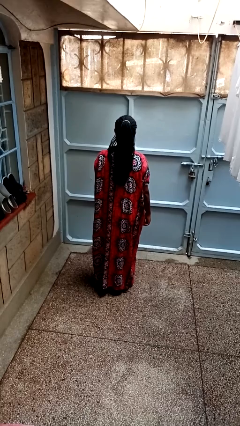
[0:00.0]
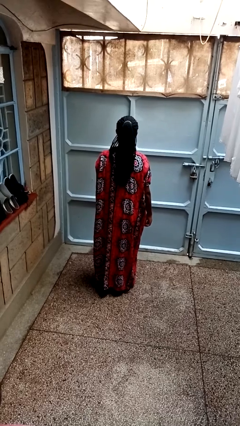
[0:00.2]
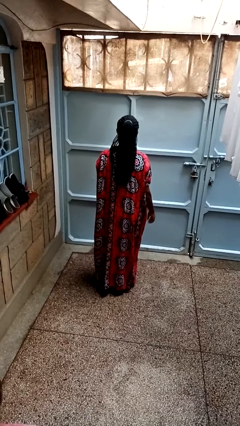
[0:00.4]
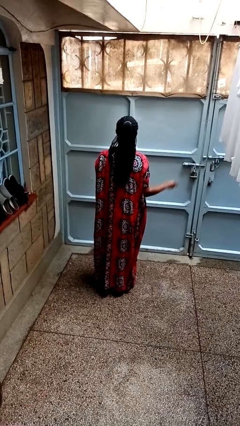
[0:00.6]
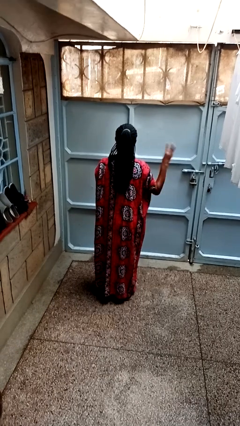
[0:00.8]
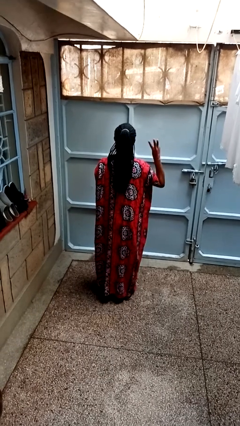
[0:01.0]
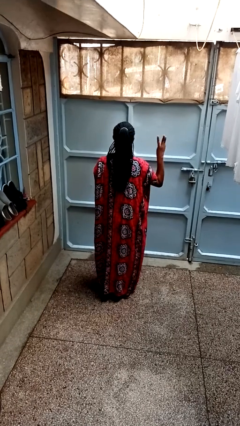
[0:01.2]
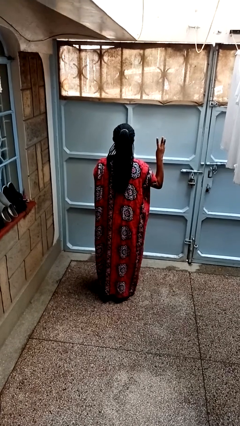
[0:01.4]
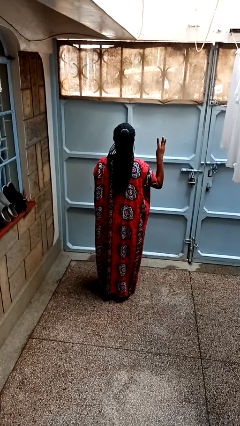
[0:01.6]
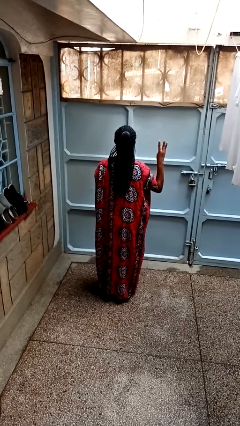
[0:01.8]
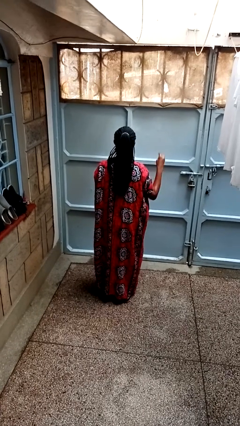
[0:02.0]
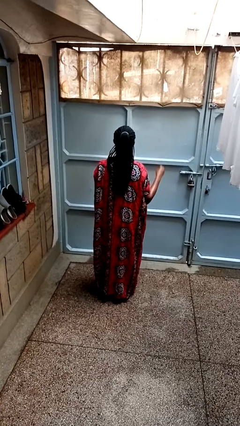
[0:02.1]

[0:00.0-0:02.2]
person gestures number three

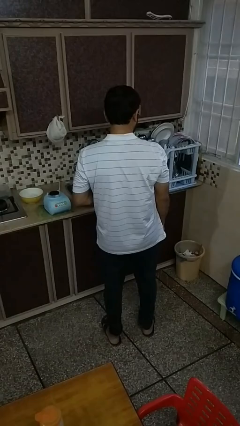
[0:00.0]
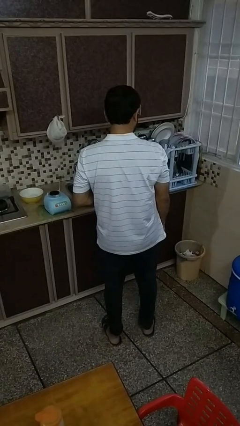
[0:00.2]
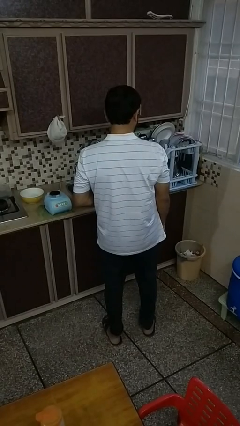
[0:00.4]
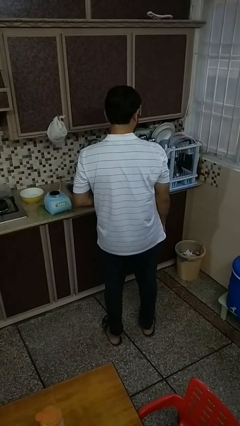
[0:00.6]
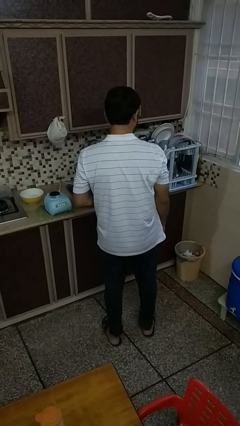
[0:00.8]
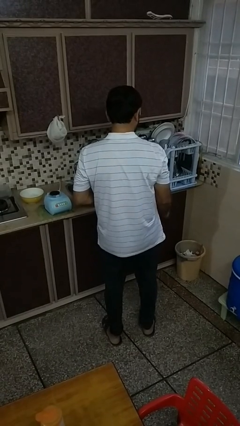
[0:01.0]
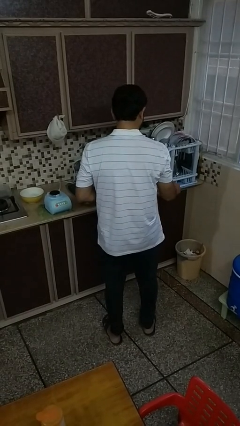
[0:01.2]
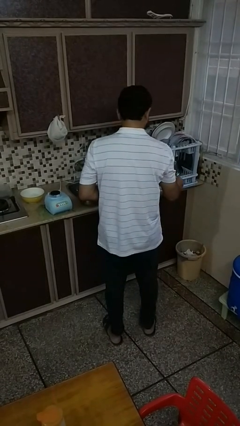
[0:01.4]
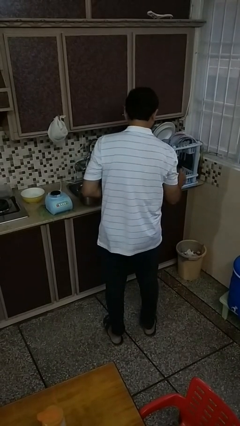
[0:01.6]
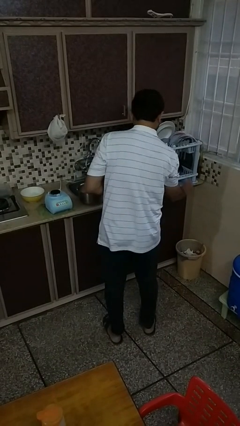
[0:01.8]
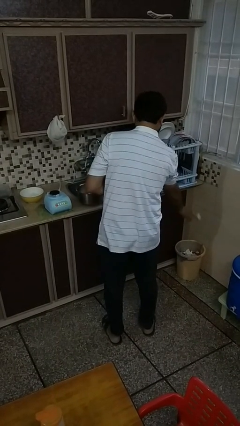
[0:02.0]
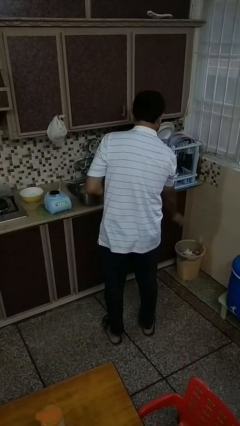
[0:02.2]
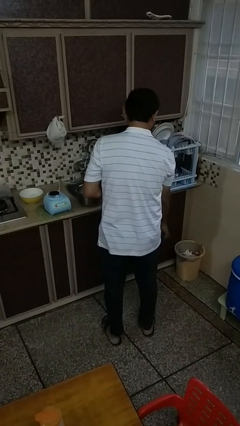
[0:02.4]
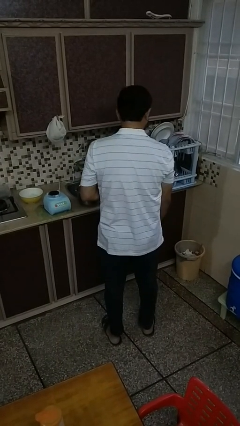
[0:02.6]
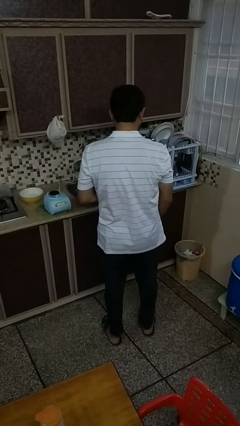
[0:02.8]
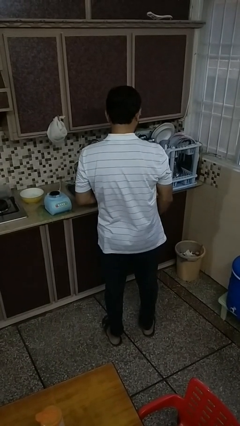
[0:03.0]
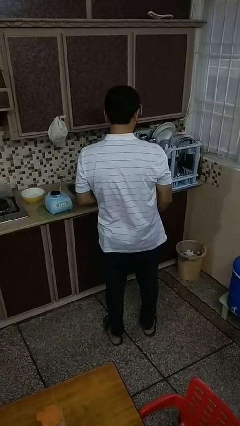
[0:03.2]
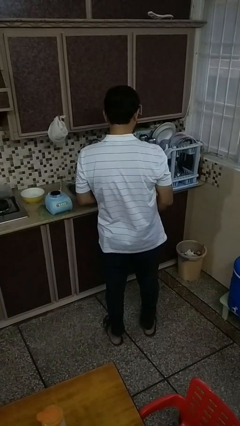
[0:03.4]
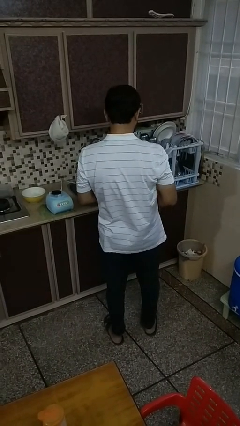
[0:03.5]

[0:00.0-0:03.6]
person discards trash

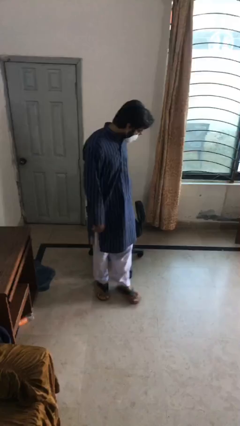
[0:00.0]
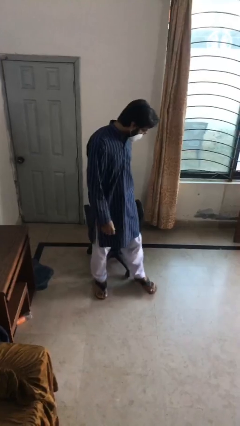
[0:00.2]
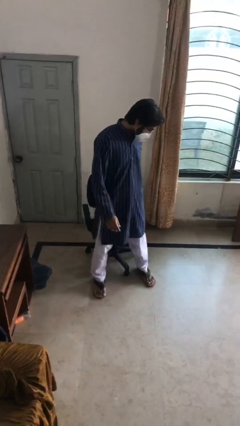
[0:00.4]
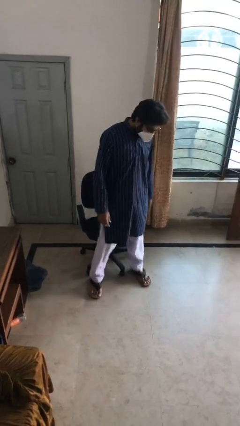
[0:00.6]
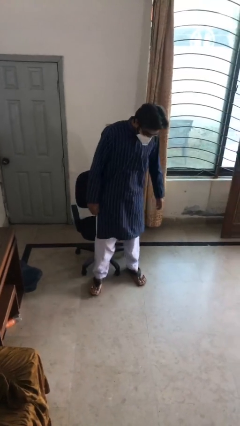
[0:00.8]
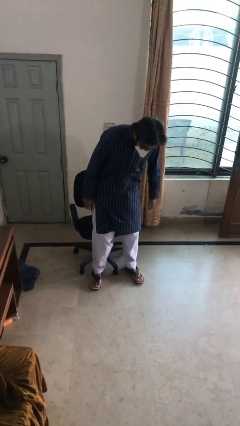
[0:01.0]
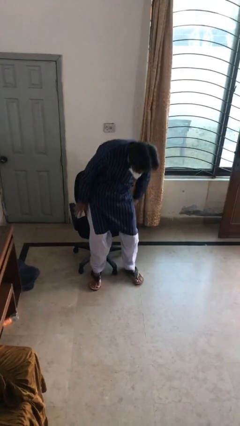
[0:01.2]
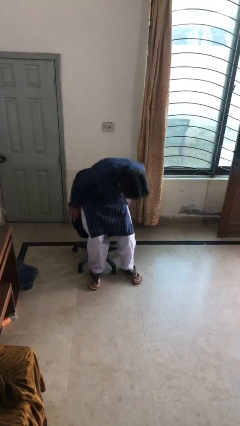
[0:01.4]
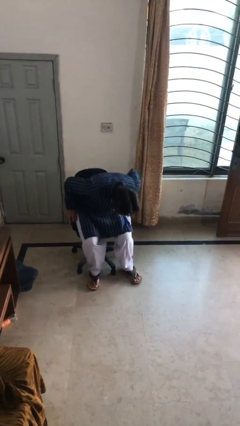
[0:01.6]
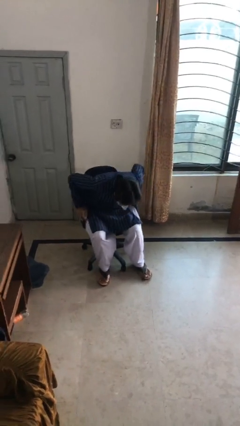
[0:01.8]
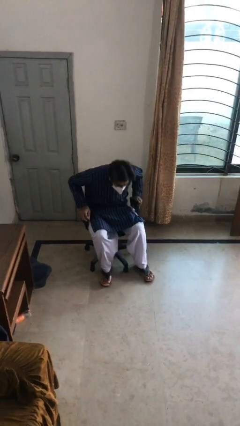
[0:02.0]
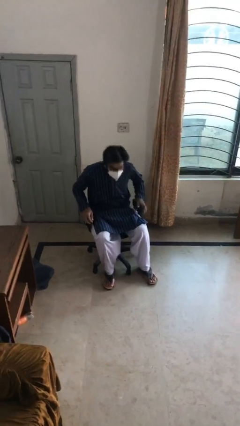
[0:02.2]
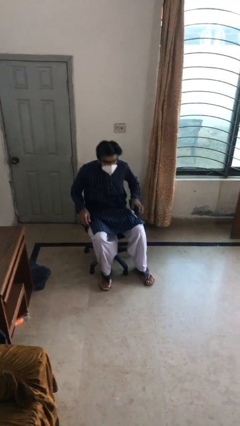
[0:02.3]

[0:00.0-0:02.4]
person sits down

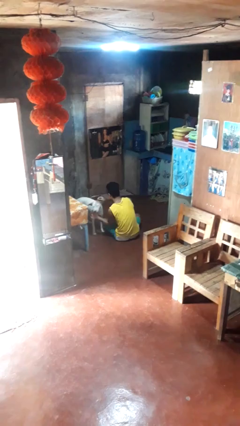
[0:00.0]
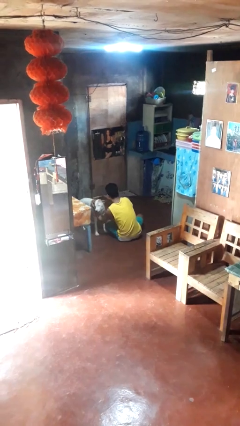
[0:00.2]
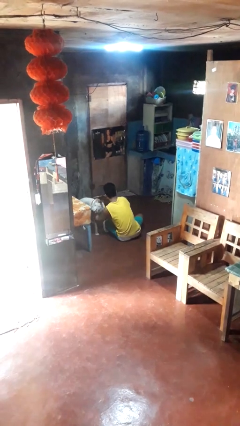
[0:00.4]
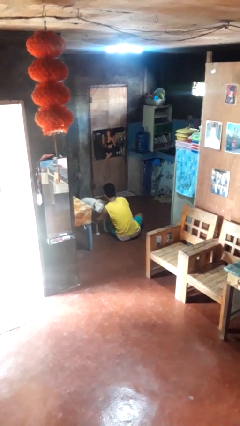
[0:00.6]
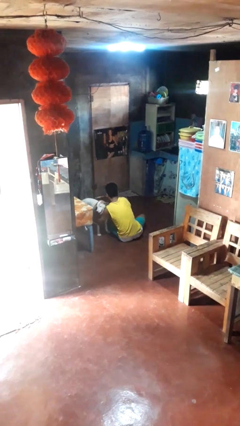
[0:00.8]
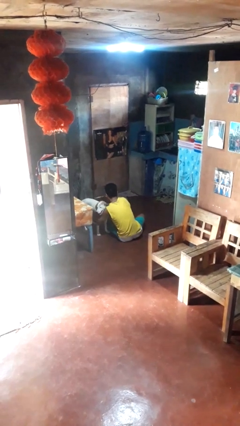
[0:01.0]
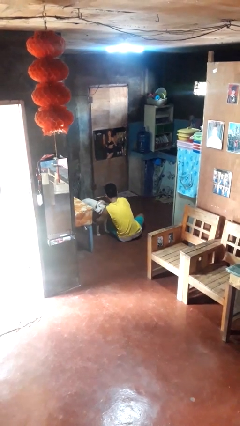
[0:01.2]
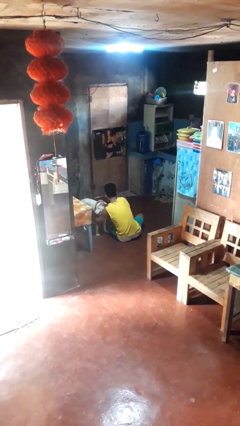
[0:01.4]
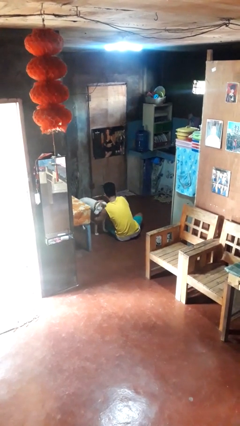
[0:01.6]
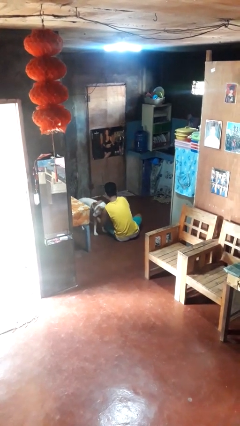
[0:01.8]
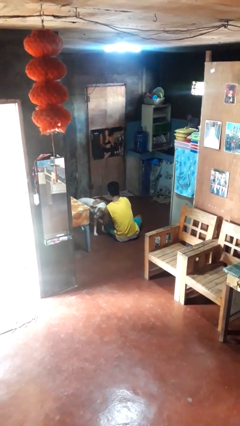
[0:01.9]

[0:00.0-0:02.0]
person hugs dog

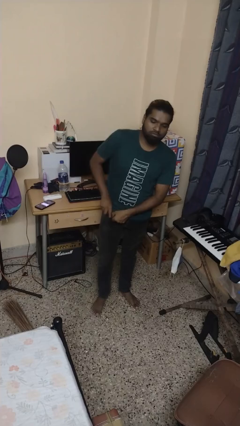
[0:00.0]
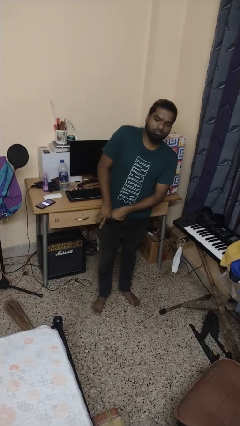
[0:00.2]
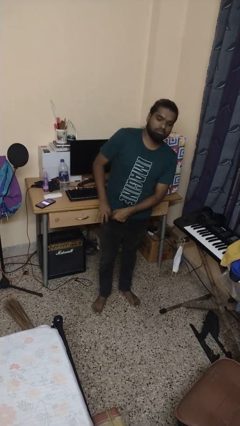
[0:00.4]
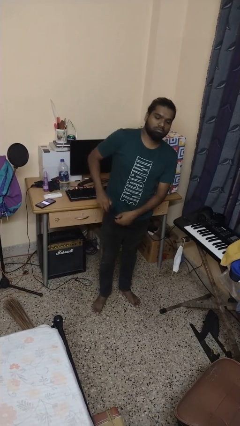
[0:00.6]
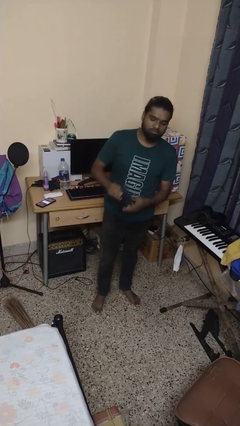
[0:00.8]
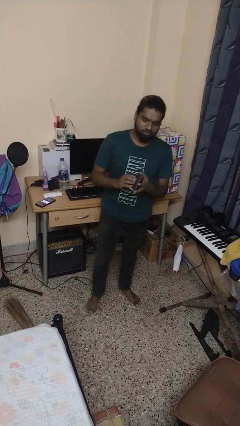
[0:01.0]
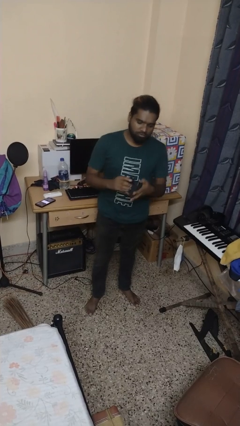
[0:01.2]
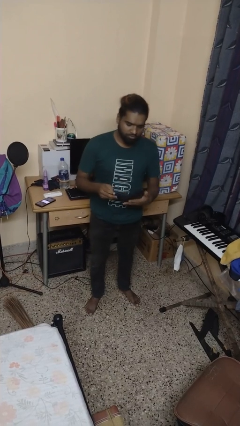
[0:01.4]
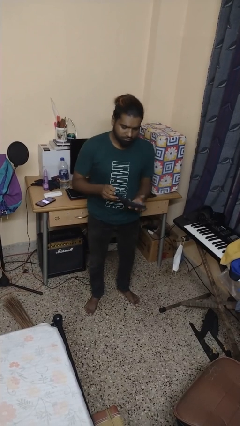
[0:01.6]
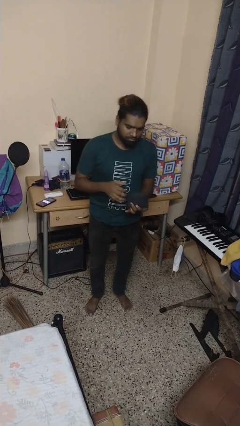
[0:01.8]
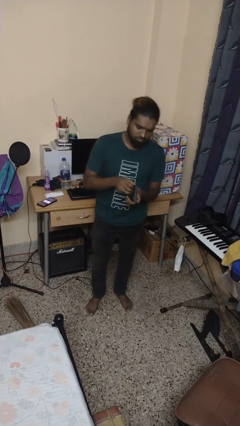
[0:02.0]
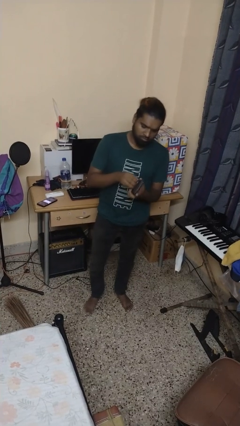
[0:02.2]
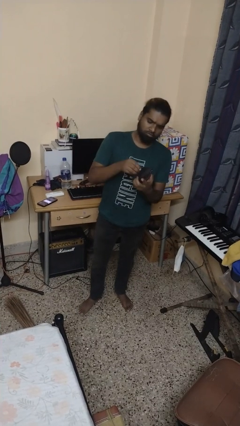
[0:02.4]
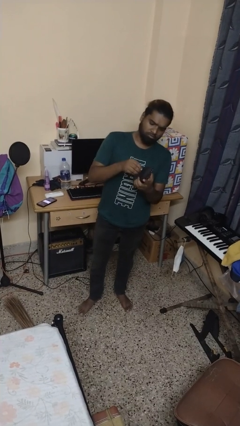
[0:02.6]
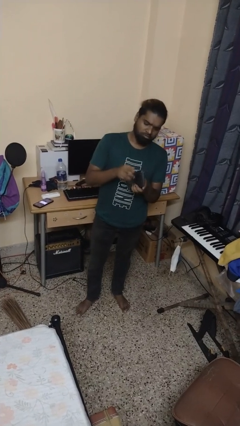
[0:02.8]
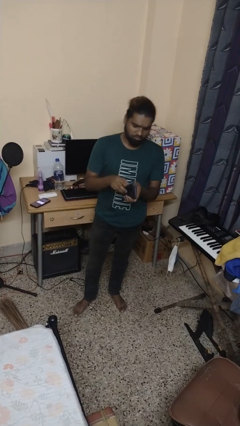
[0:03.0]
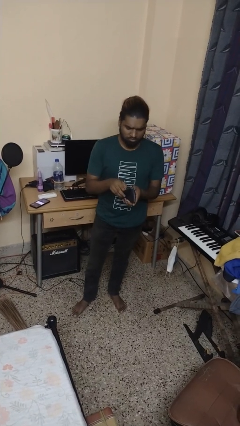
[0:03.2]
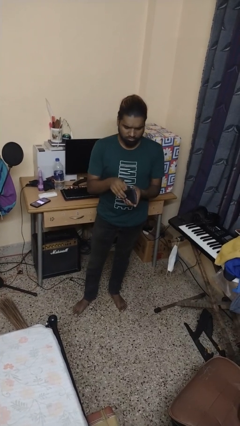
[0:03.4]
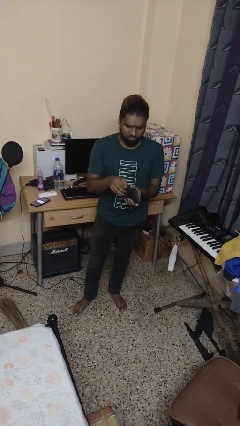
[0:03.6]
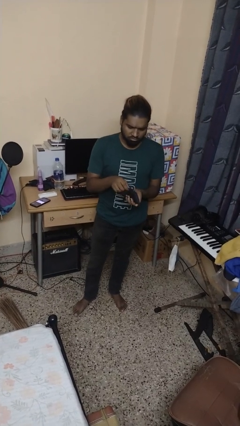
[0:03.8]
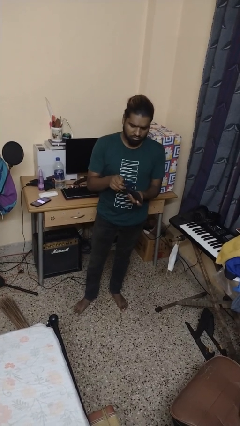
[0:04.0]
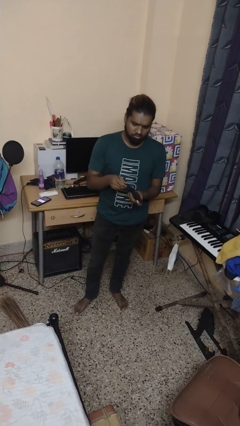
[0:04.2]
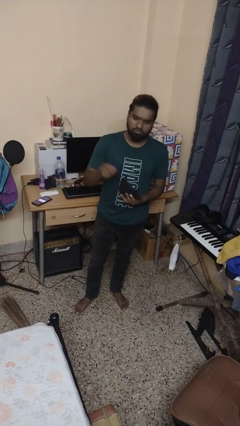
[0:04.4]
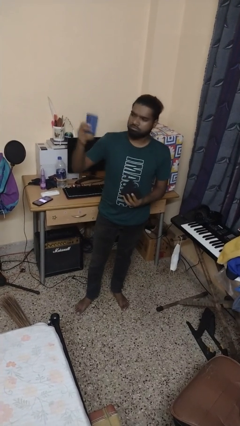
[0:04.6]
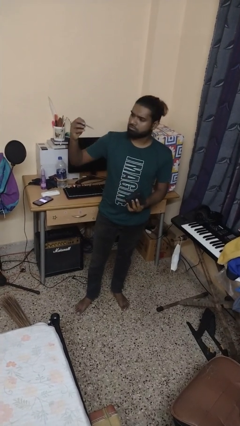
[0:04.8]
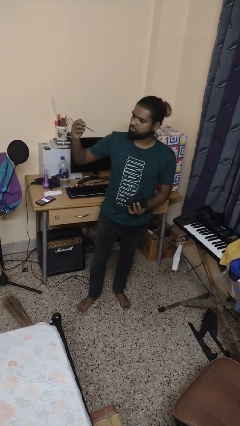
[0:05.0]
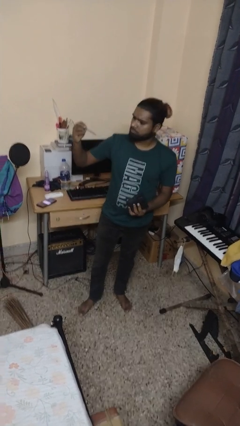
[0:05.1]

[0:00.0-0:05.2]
person searches in purse

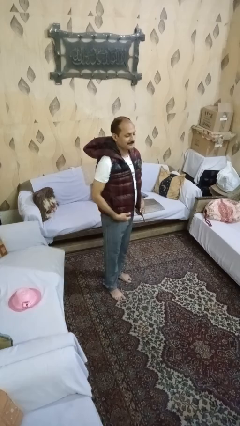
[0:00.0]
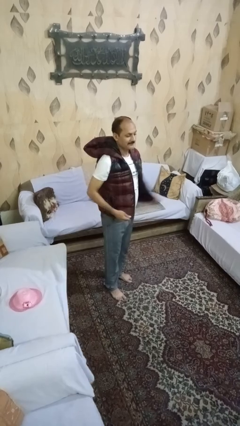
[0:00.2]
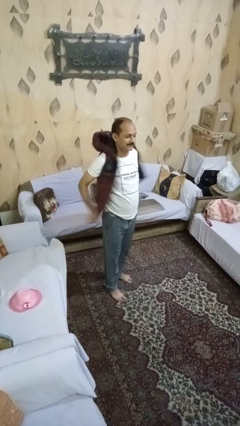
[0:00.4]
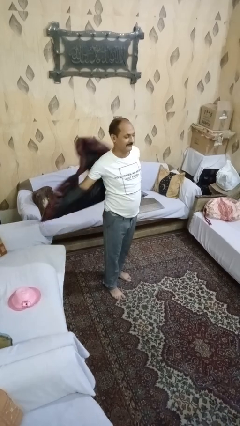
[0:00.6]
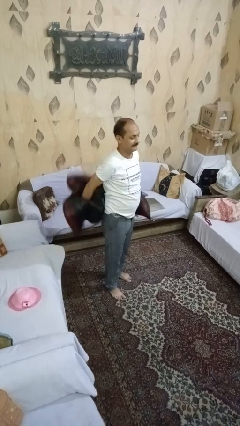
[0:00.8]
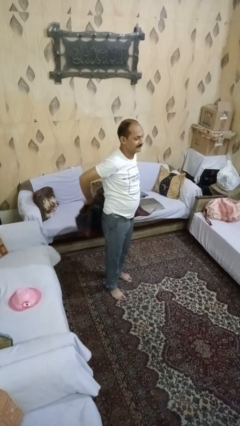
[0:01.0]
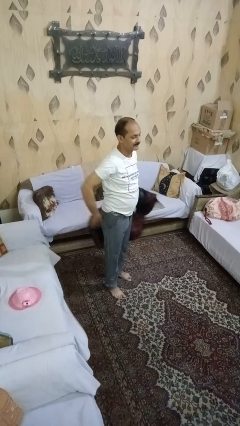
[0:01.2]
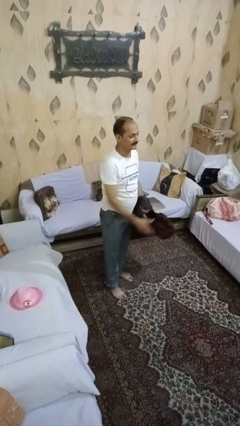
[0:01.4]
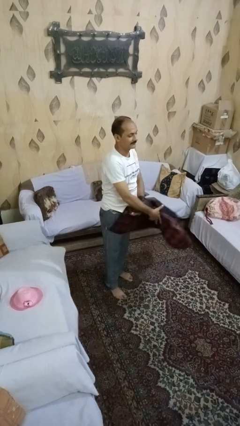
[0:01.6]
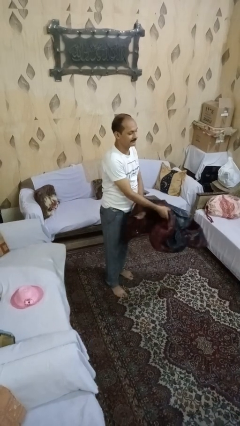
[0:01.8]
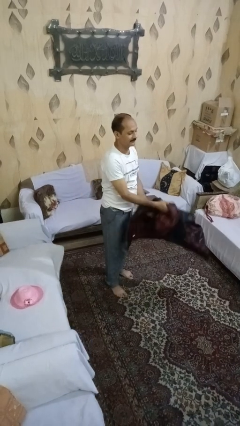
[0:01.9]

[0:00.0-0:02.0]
person takes off jacket

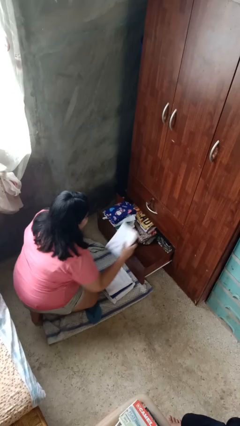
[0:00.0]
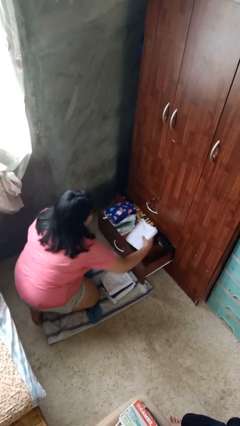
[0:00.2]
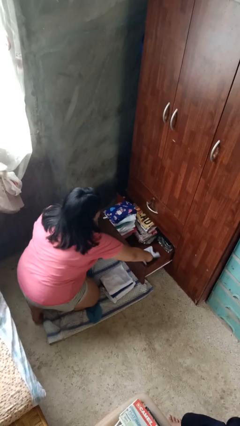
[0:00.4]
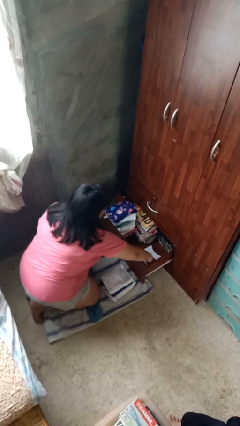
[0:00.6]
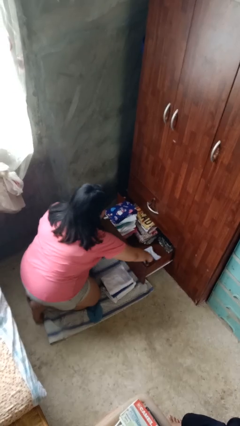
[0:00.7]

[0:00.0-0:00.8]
person puts clothes into dresser
